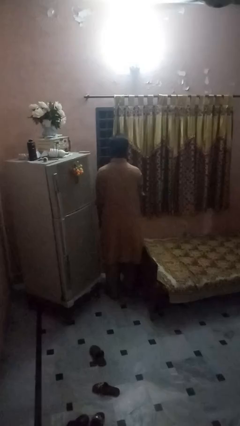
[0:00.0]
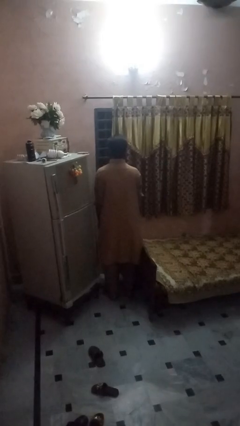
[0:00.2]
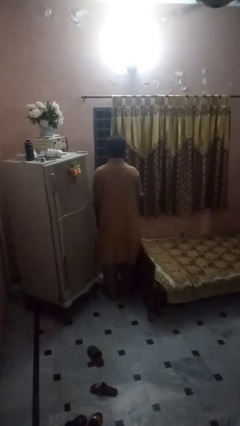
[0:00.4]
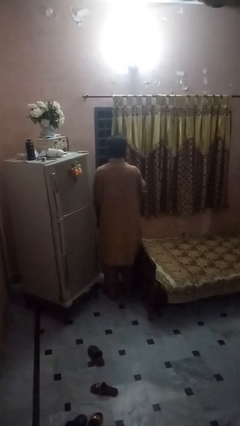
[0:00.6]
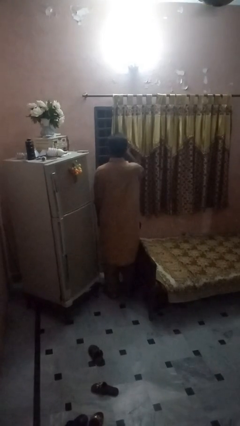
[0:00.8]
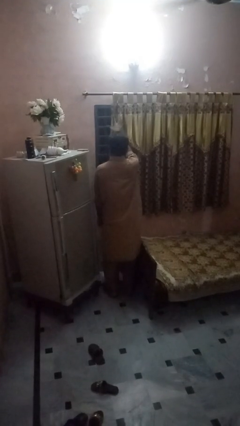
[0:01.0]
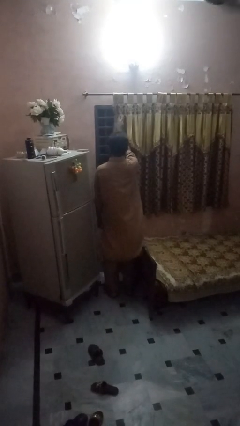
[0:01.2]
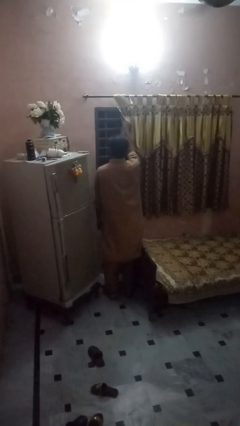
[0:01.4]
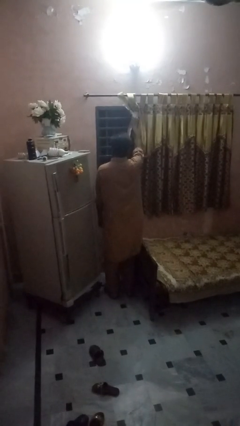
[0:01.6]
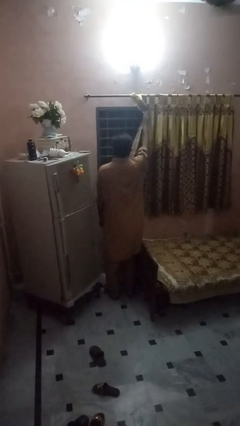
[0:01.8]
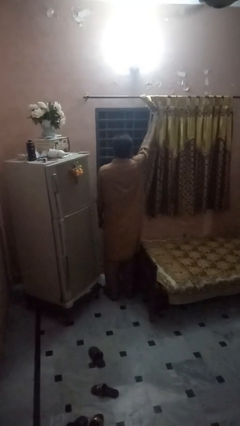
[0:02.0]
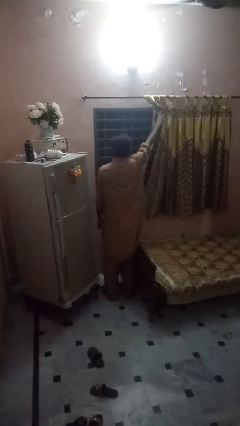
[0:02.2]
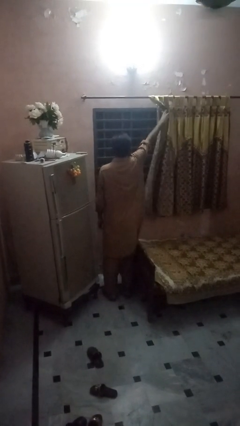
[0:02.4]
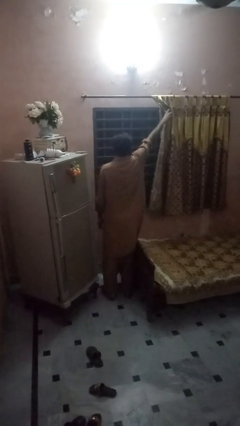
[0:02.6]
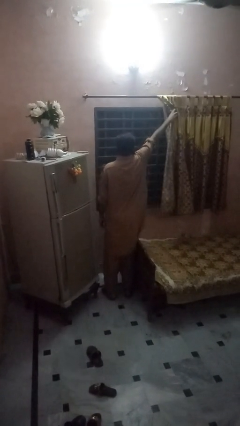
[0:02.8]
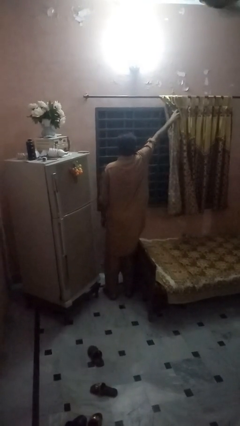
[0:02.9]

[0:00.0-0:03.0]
person opens curtains

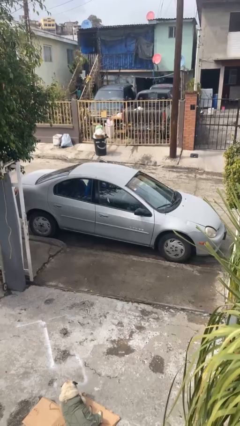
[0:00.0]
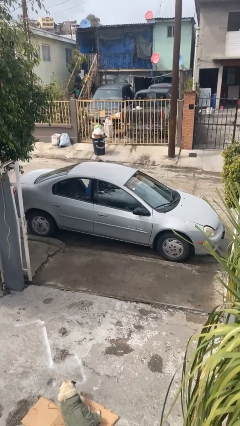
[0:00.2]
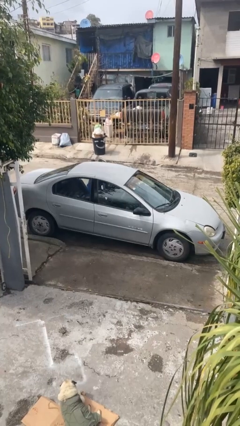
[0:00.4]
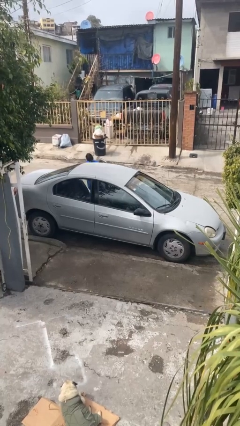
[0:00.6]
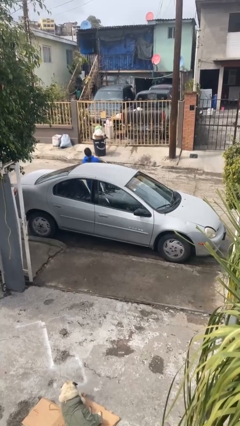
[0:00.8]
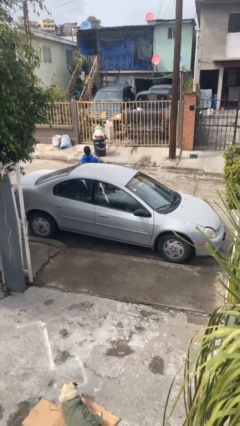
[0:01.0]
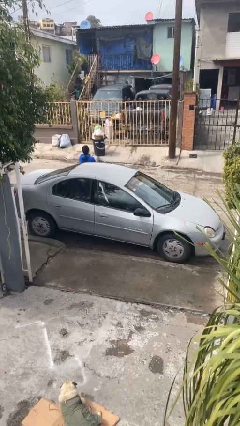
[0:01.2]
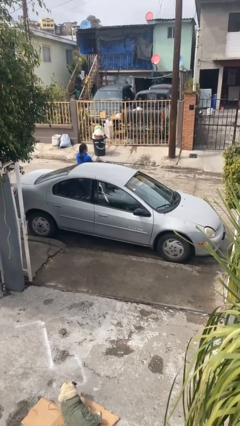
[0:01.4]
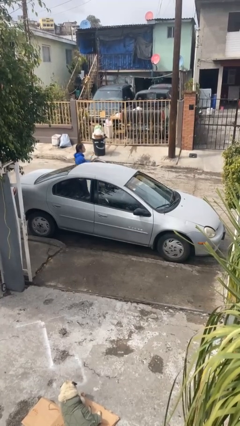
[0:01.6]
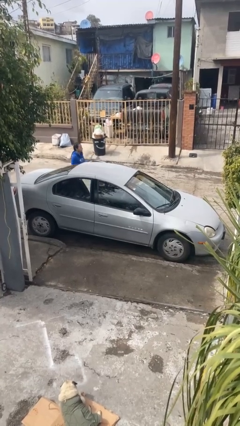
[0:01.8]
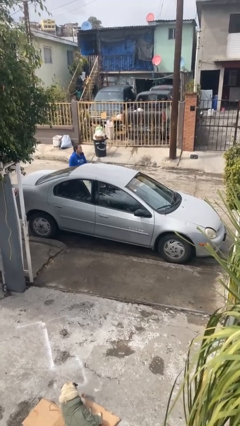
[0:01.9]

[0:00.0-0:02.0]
car drops off person

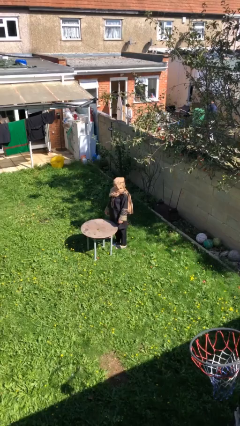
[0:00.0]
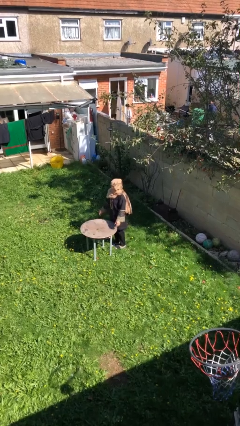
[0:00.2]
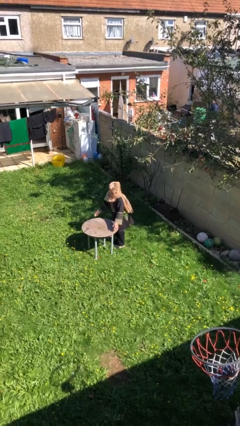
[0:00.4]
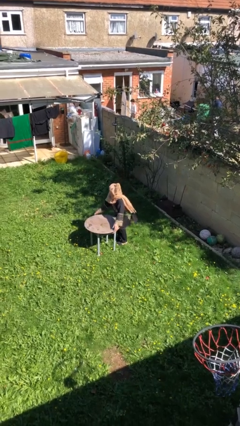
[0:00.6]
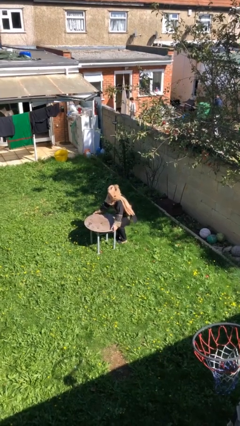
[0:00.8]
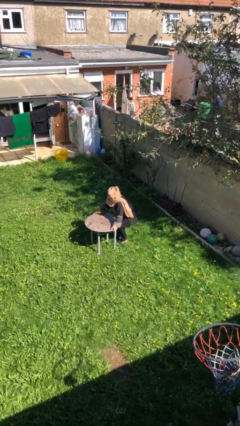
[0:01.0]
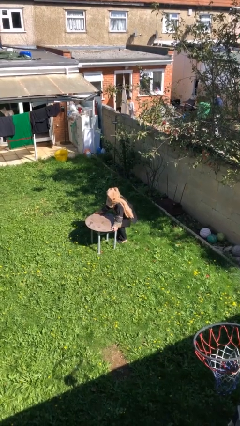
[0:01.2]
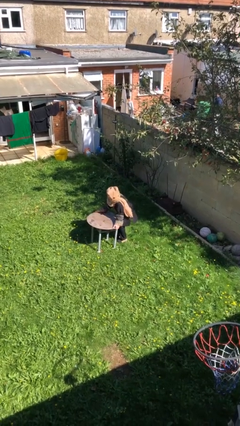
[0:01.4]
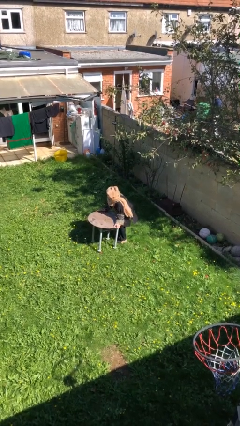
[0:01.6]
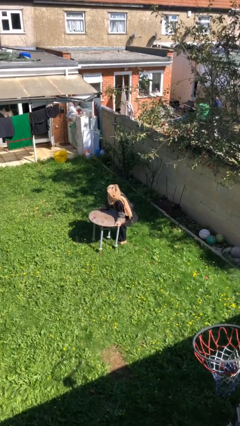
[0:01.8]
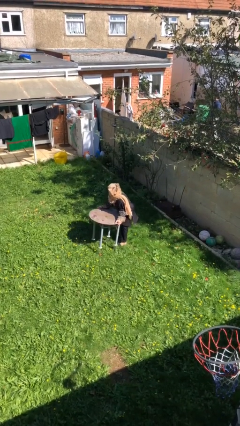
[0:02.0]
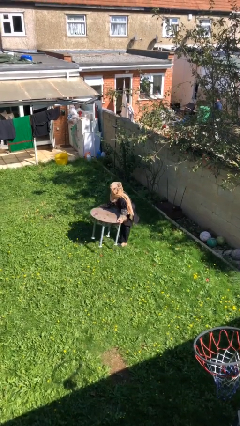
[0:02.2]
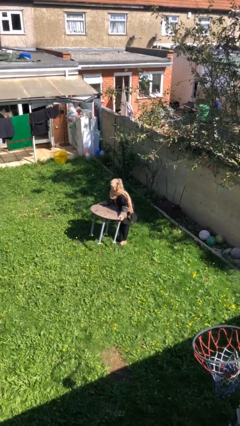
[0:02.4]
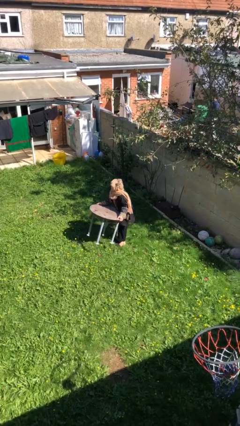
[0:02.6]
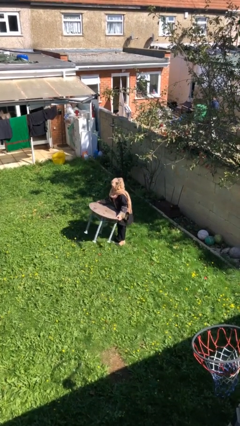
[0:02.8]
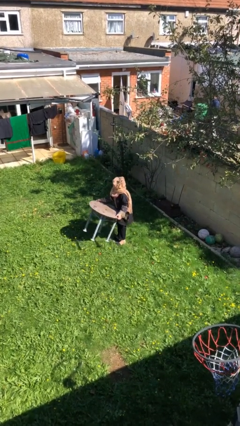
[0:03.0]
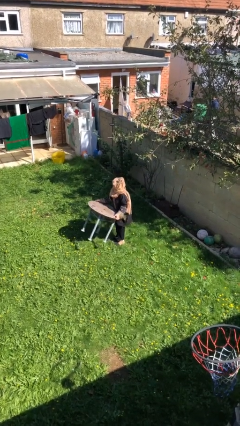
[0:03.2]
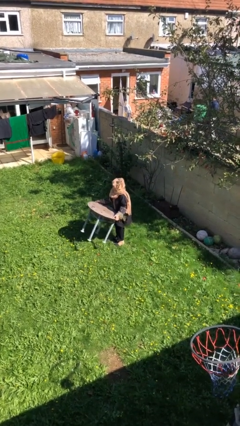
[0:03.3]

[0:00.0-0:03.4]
person picks up object from floor

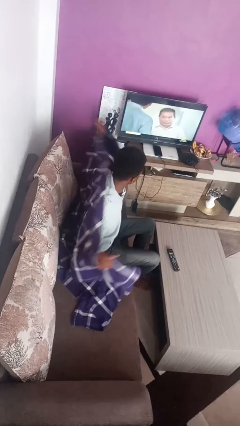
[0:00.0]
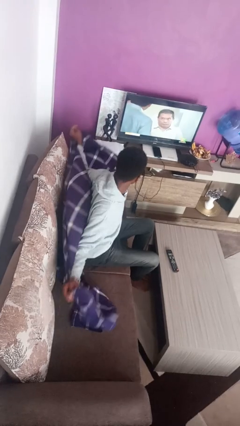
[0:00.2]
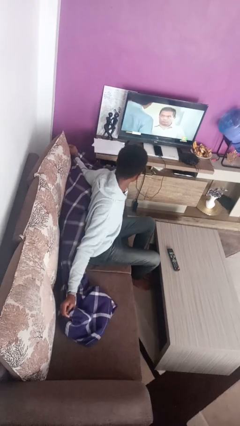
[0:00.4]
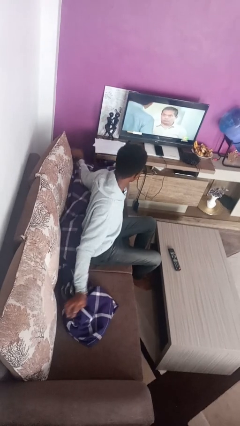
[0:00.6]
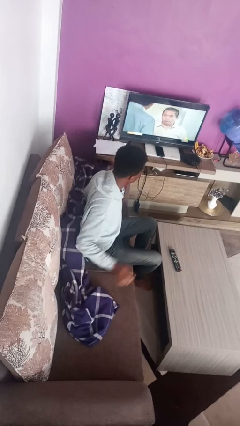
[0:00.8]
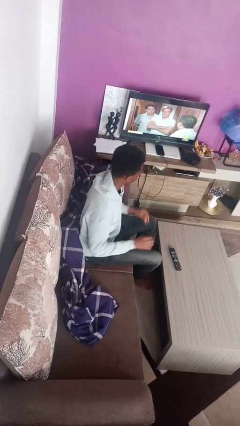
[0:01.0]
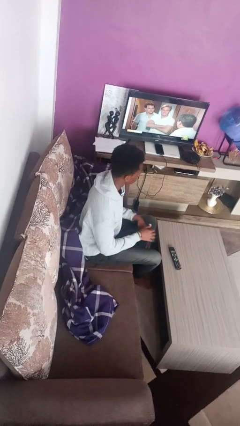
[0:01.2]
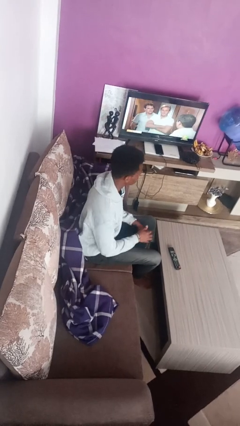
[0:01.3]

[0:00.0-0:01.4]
person uncovers with blanket

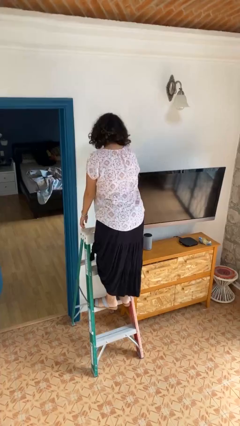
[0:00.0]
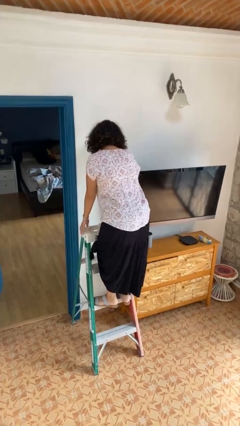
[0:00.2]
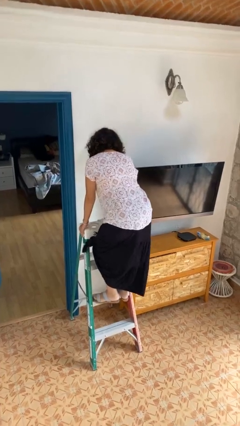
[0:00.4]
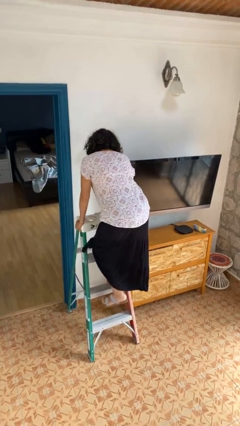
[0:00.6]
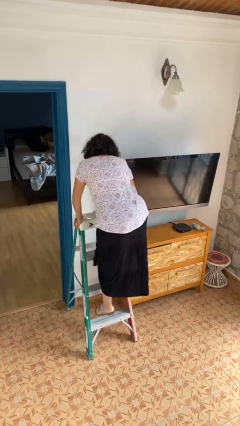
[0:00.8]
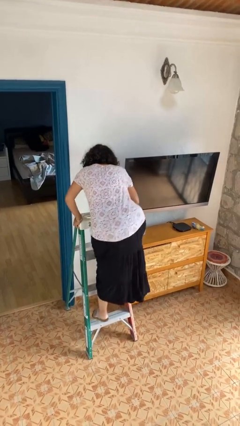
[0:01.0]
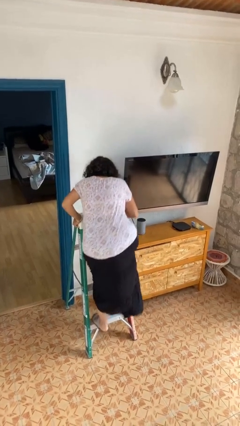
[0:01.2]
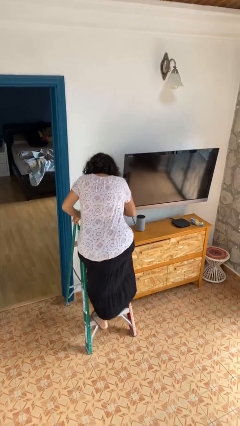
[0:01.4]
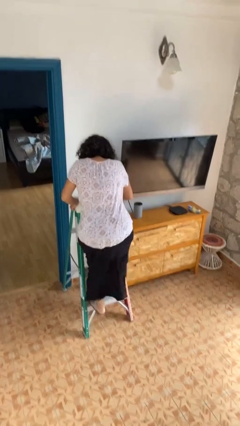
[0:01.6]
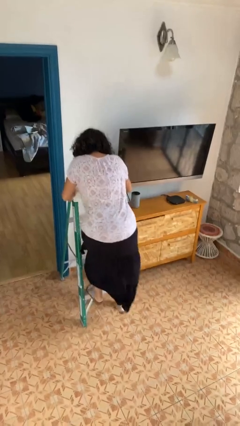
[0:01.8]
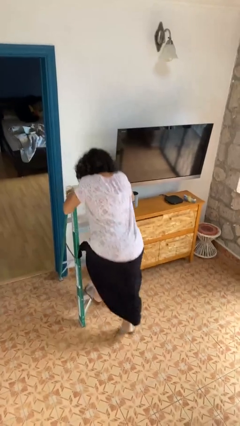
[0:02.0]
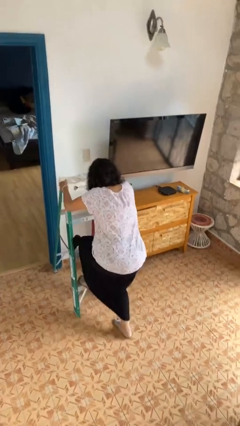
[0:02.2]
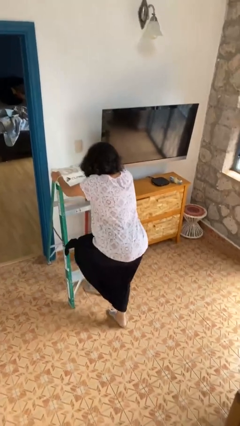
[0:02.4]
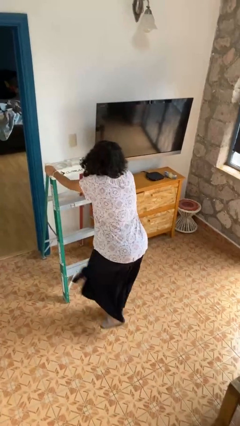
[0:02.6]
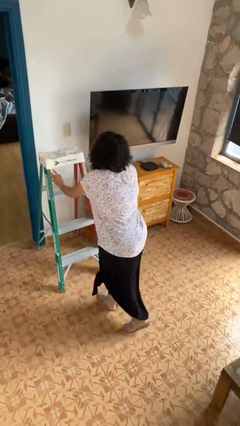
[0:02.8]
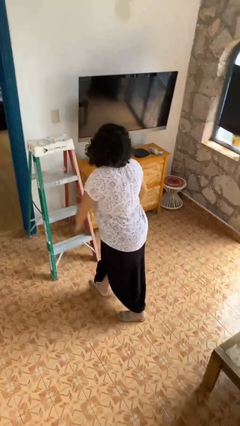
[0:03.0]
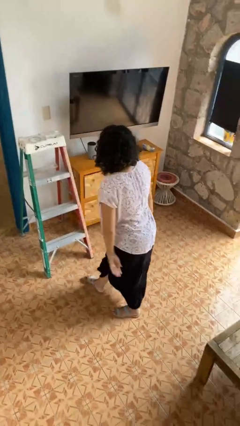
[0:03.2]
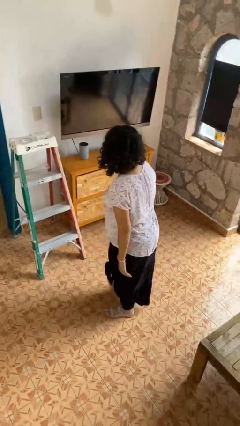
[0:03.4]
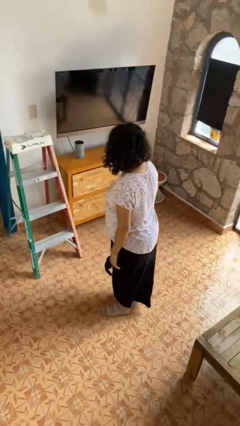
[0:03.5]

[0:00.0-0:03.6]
person climbs down ladder

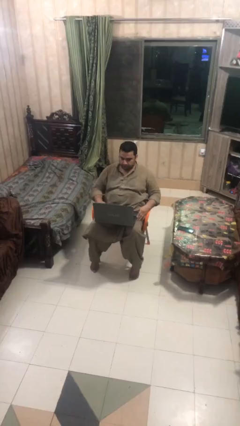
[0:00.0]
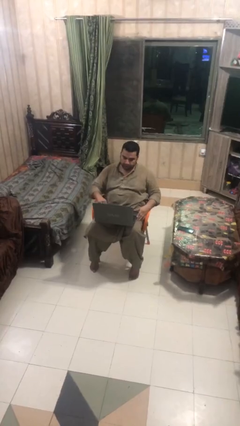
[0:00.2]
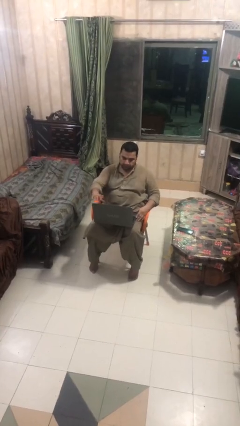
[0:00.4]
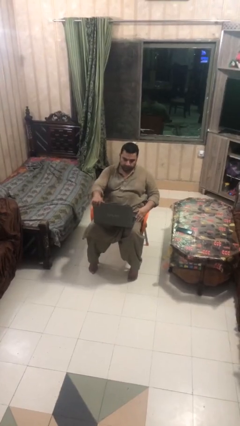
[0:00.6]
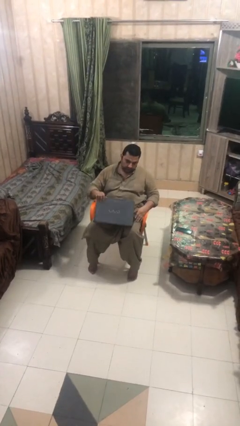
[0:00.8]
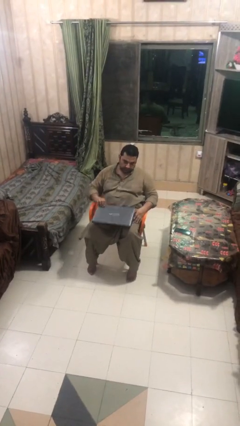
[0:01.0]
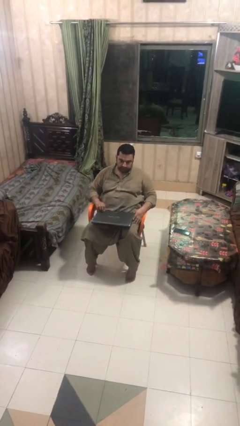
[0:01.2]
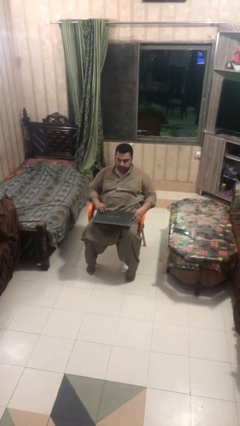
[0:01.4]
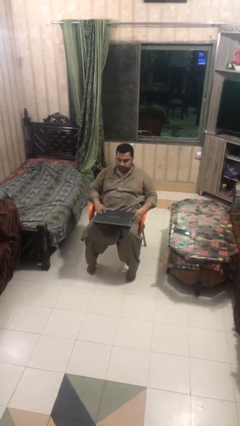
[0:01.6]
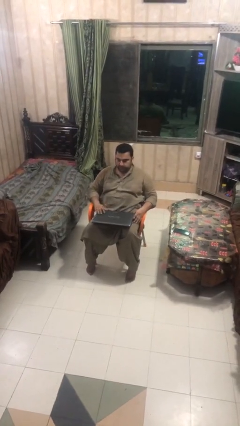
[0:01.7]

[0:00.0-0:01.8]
person closes laptop

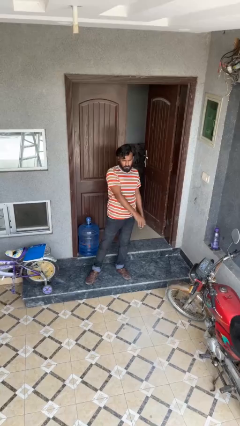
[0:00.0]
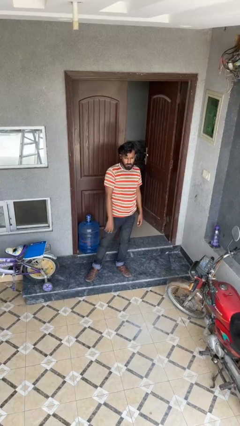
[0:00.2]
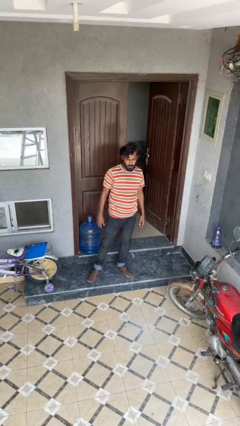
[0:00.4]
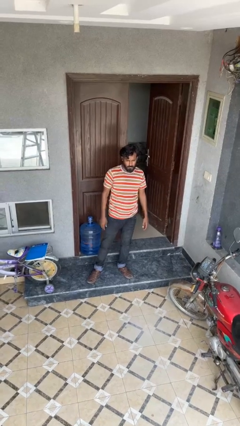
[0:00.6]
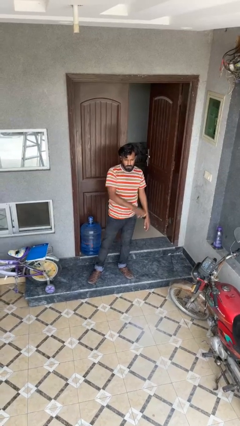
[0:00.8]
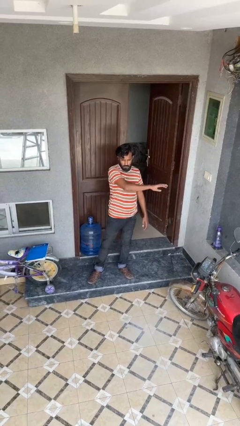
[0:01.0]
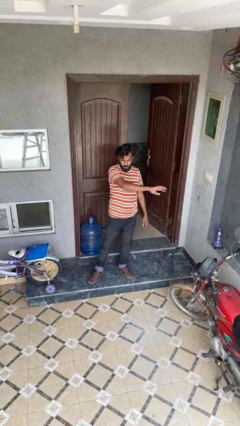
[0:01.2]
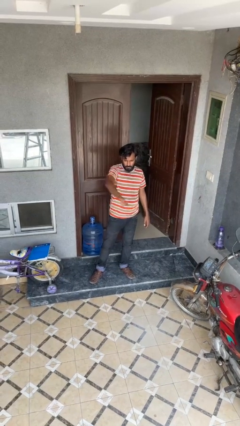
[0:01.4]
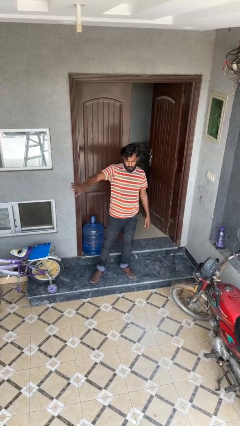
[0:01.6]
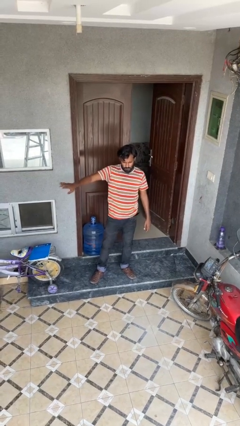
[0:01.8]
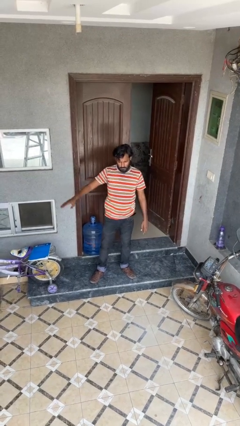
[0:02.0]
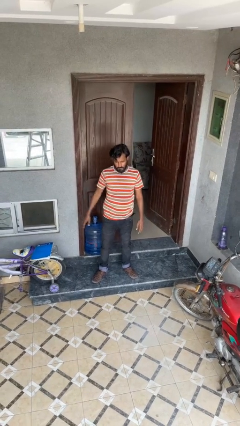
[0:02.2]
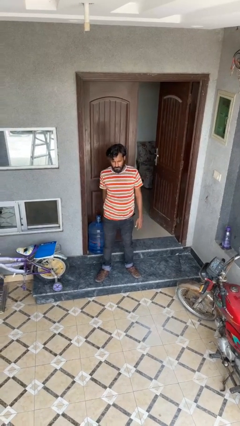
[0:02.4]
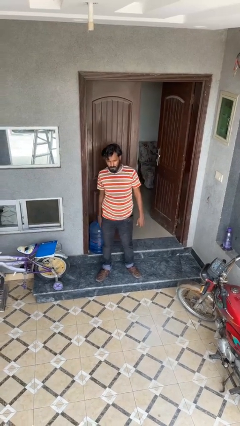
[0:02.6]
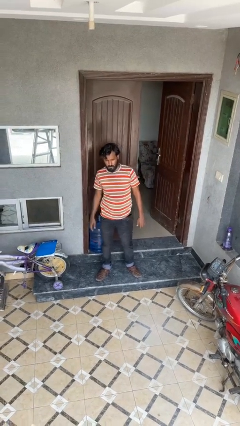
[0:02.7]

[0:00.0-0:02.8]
person gestures swipe right
